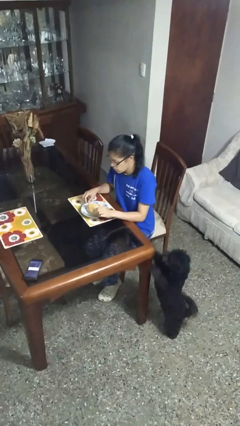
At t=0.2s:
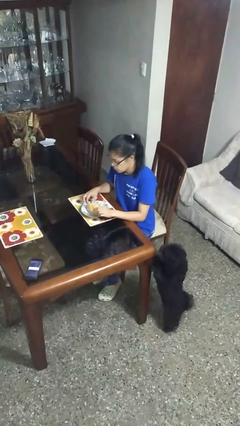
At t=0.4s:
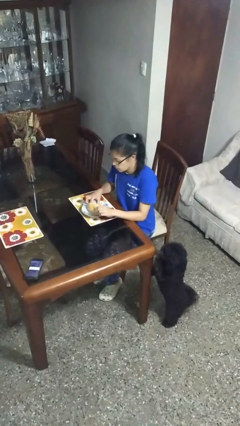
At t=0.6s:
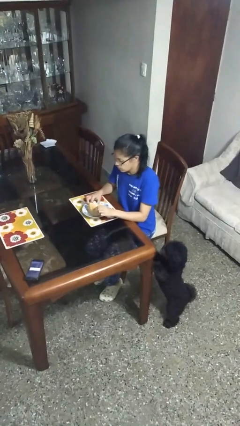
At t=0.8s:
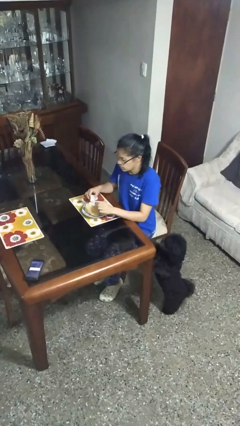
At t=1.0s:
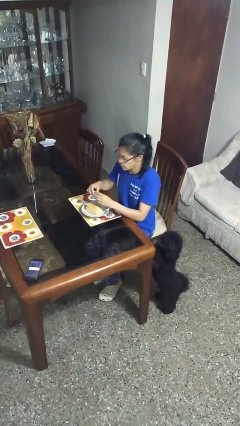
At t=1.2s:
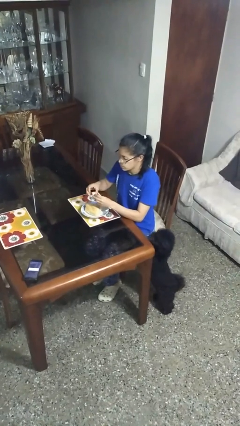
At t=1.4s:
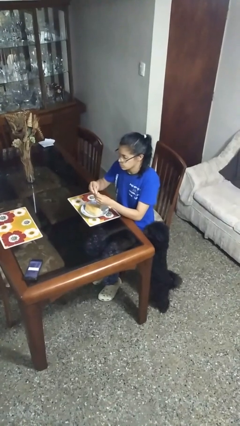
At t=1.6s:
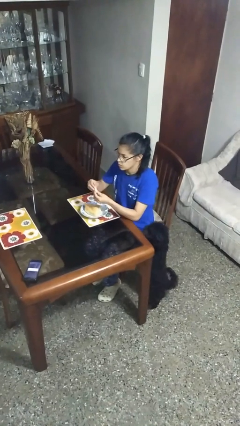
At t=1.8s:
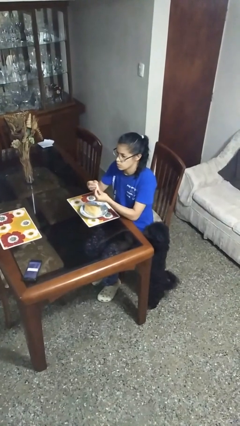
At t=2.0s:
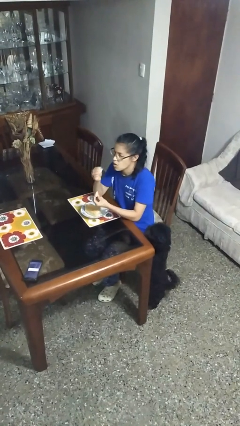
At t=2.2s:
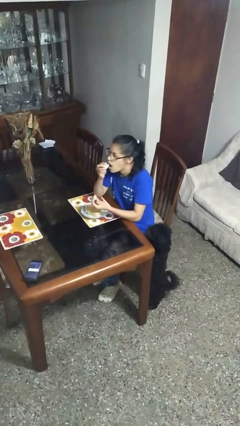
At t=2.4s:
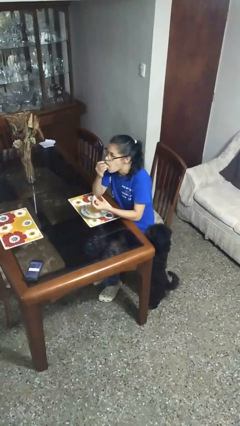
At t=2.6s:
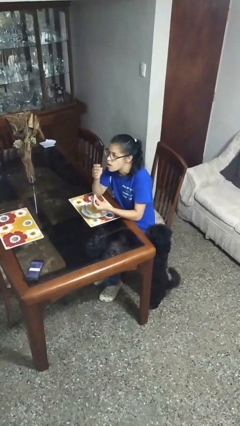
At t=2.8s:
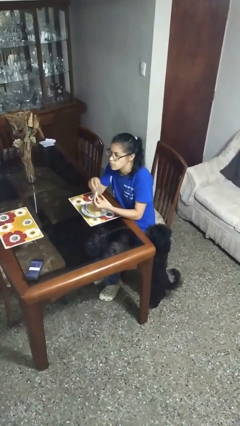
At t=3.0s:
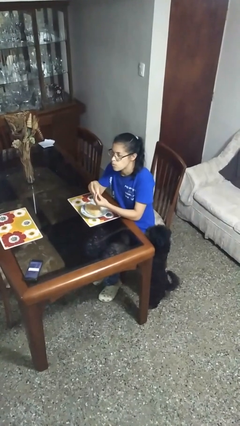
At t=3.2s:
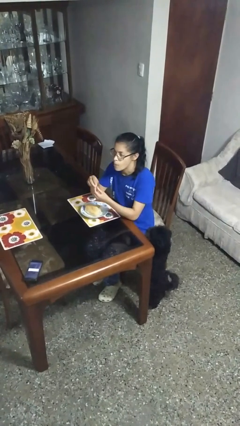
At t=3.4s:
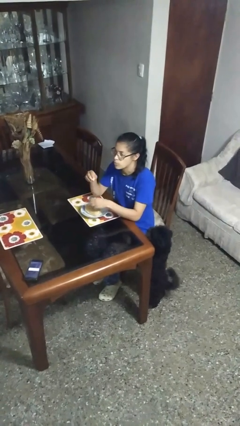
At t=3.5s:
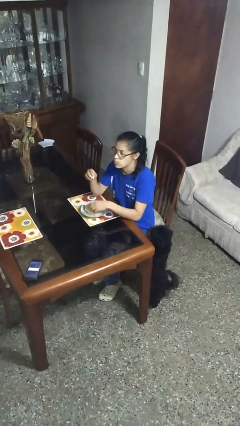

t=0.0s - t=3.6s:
person eats with hands

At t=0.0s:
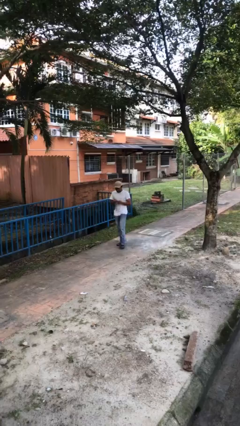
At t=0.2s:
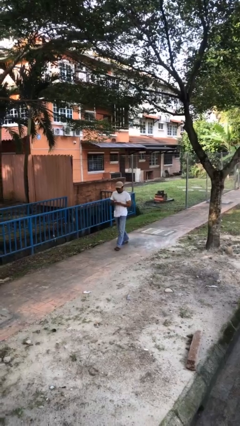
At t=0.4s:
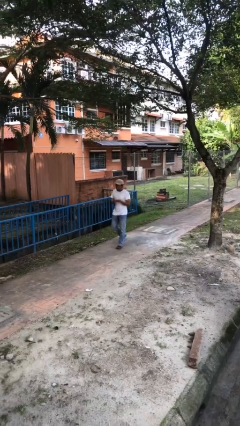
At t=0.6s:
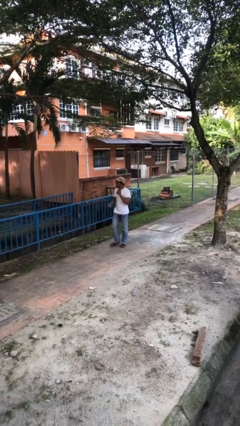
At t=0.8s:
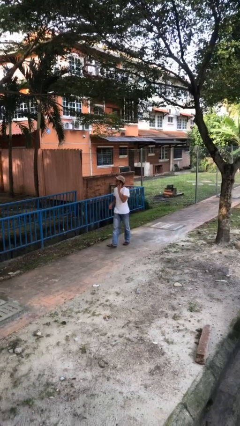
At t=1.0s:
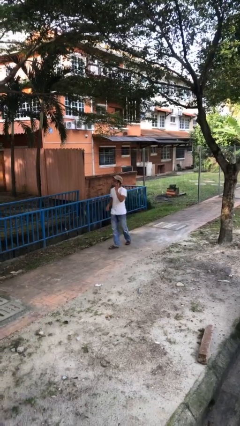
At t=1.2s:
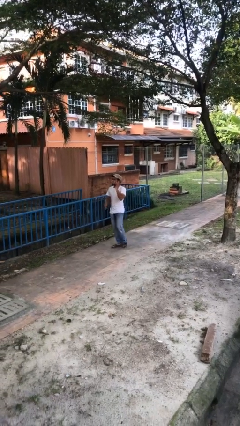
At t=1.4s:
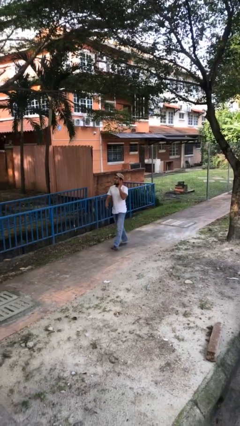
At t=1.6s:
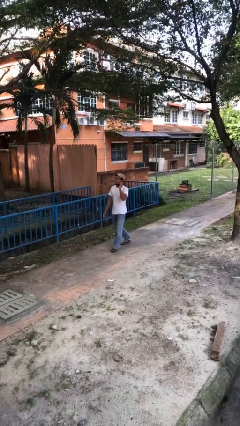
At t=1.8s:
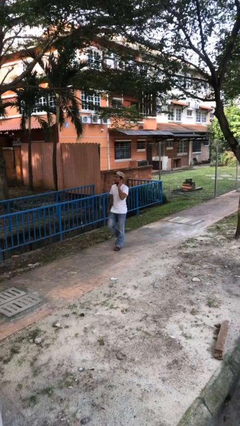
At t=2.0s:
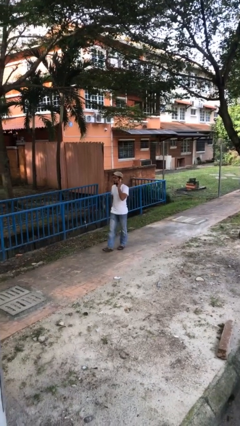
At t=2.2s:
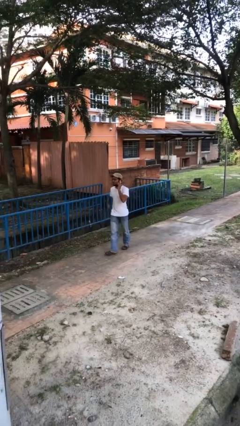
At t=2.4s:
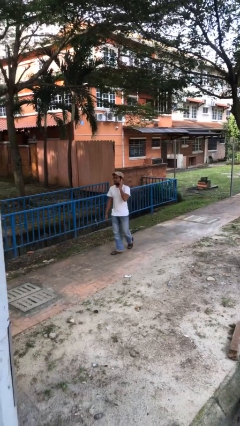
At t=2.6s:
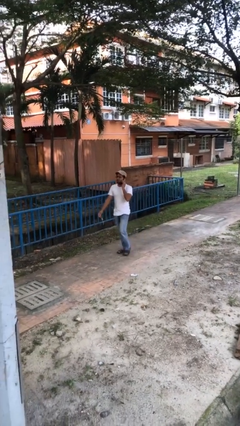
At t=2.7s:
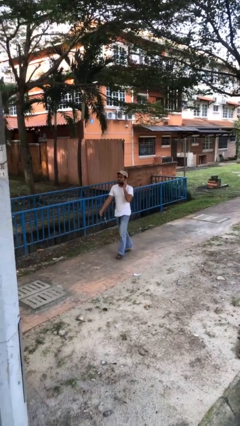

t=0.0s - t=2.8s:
person talks on phone

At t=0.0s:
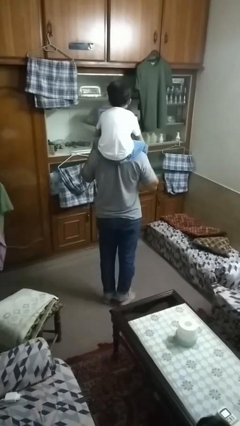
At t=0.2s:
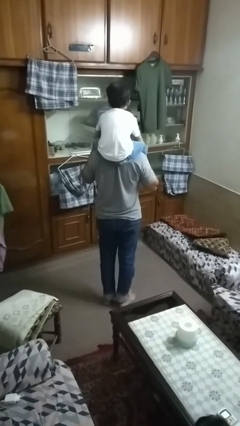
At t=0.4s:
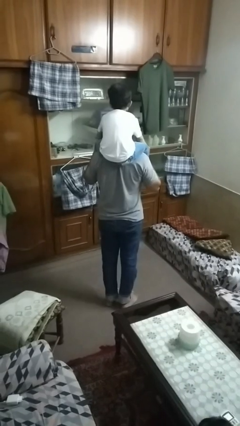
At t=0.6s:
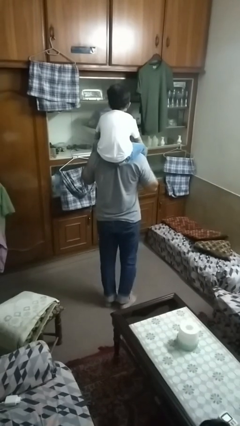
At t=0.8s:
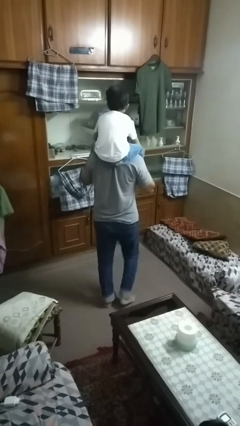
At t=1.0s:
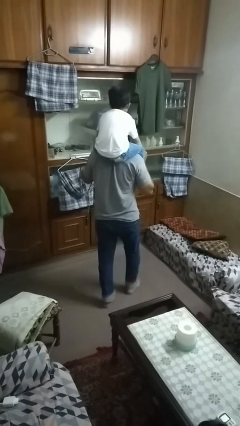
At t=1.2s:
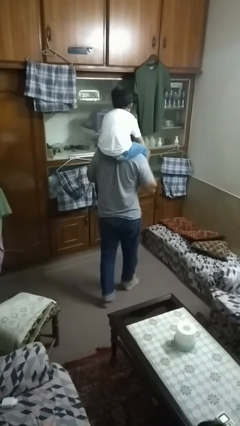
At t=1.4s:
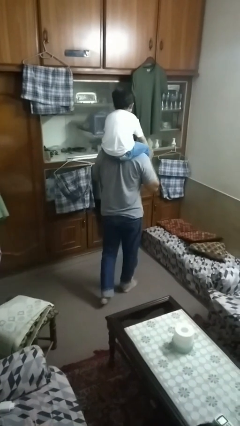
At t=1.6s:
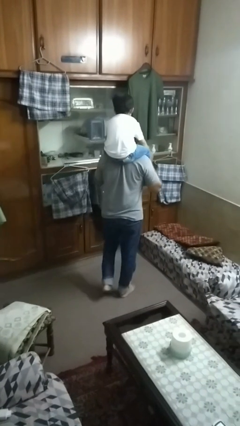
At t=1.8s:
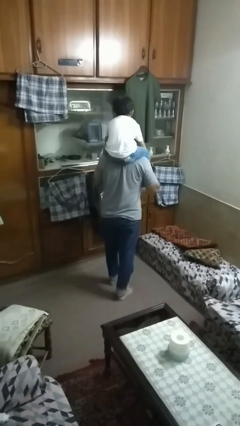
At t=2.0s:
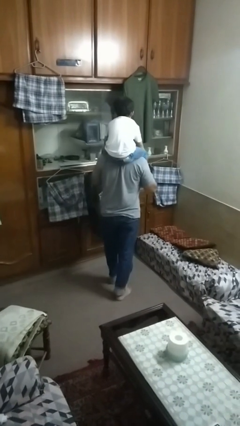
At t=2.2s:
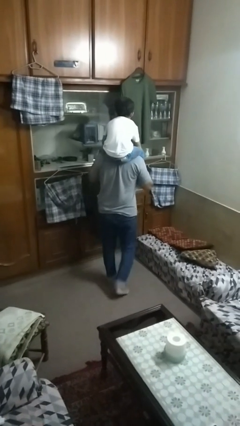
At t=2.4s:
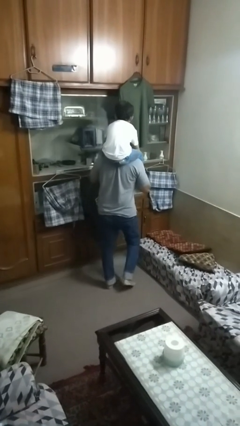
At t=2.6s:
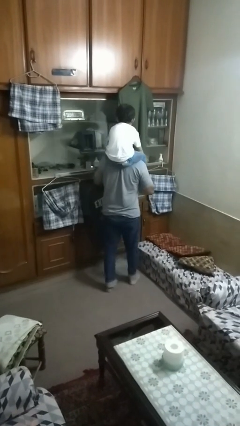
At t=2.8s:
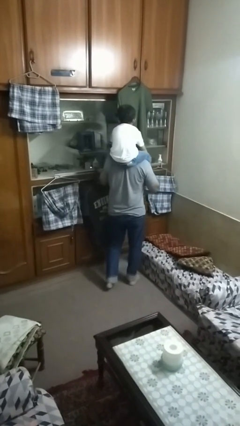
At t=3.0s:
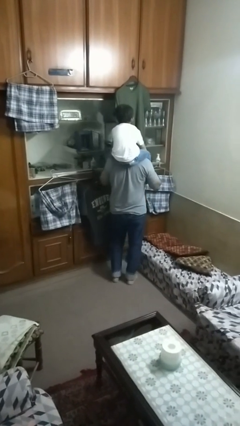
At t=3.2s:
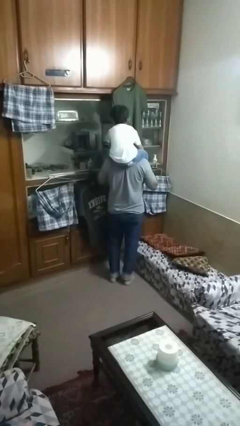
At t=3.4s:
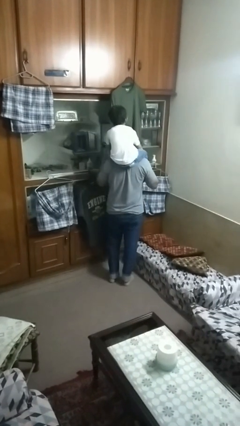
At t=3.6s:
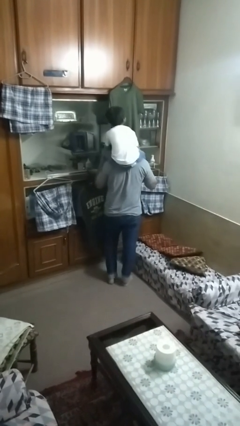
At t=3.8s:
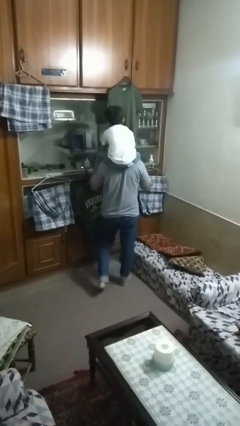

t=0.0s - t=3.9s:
person carries person on shoulders

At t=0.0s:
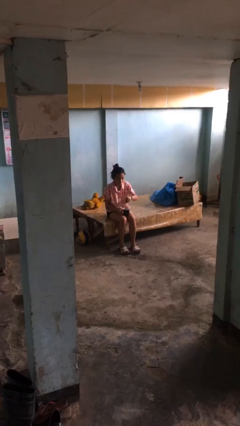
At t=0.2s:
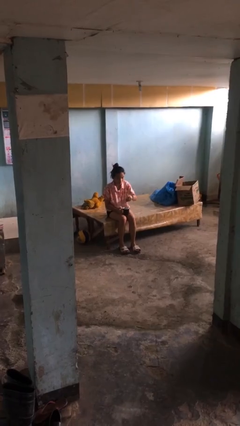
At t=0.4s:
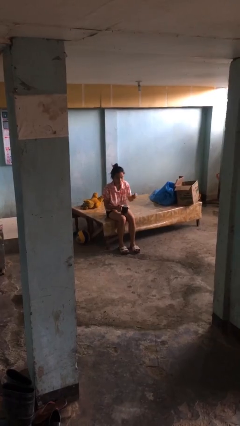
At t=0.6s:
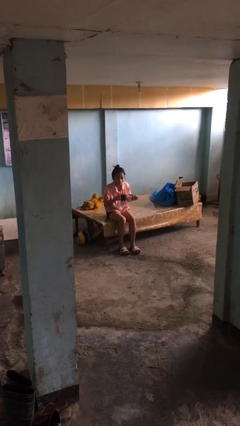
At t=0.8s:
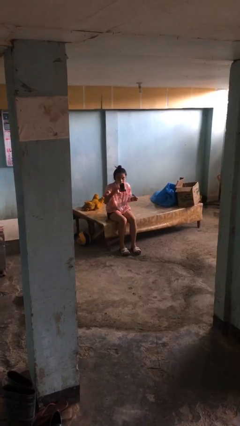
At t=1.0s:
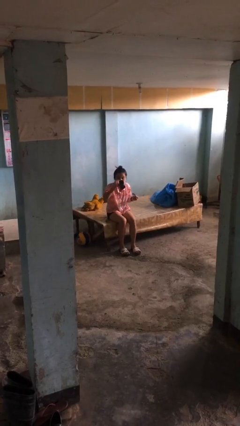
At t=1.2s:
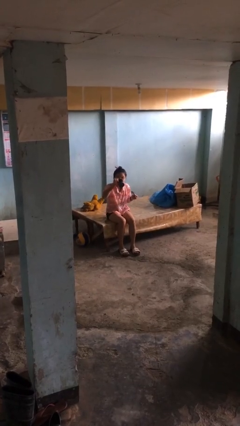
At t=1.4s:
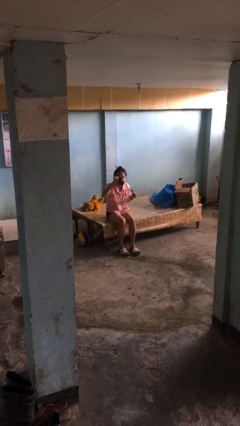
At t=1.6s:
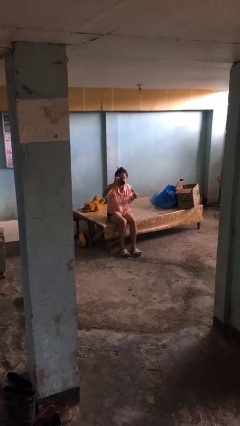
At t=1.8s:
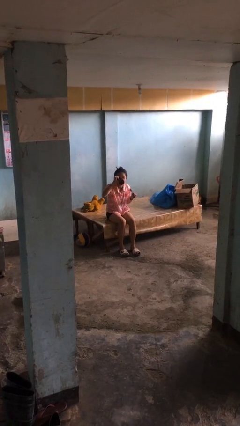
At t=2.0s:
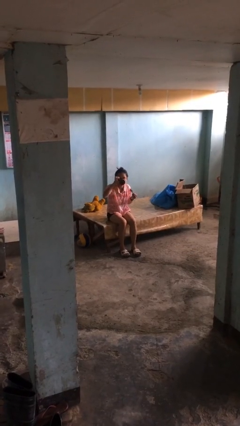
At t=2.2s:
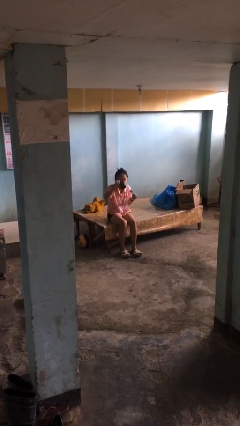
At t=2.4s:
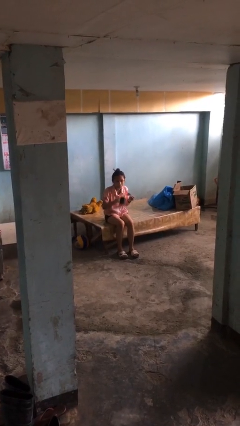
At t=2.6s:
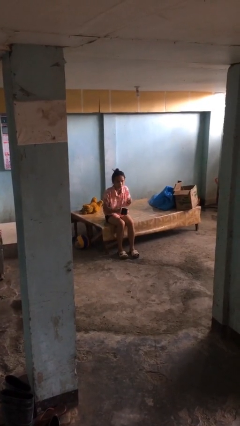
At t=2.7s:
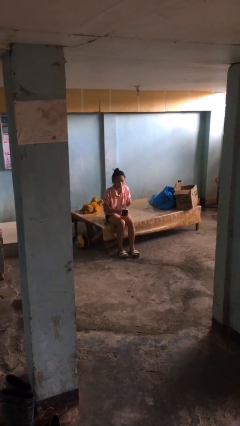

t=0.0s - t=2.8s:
person drinks from mug

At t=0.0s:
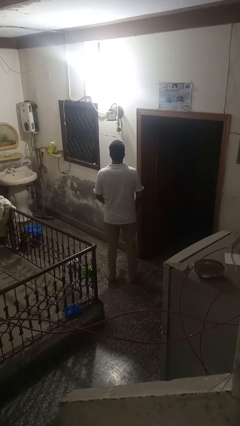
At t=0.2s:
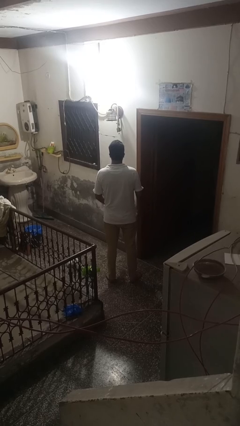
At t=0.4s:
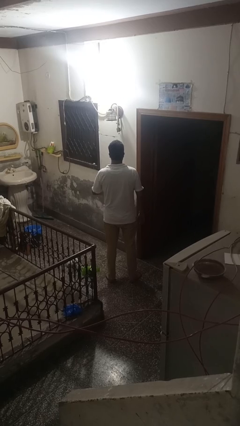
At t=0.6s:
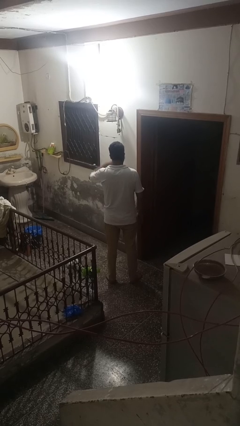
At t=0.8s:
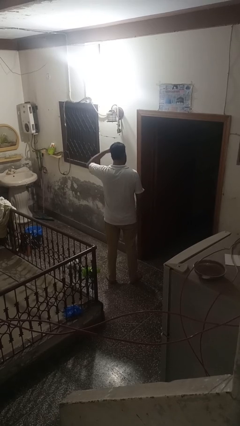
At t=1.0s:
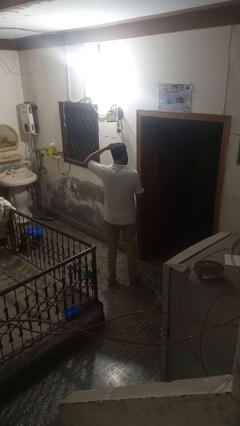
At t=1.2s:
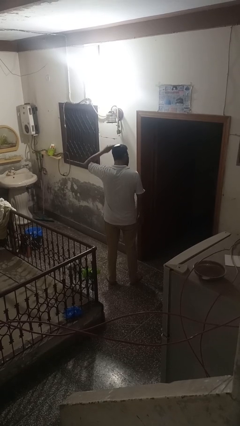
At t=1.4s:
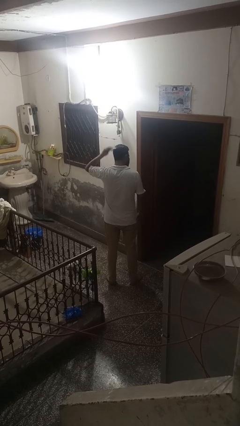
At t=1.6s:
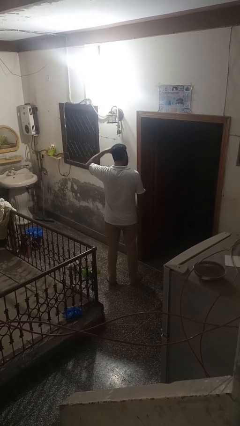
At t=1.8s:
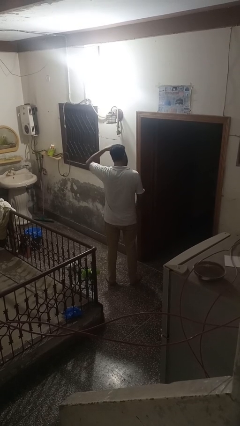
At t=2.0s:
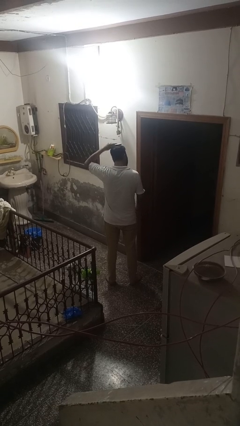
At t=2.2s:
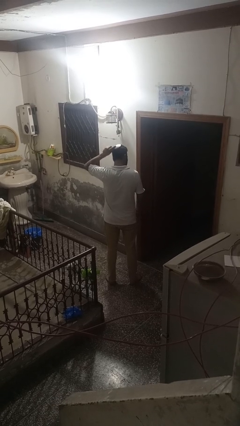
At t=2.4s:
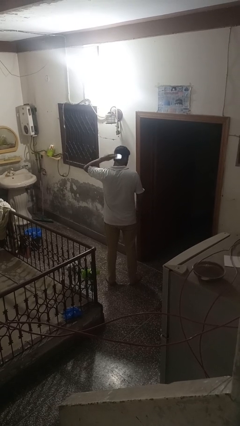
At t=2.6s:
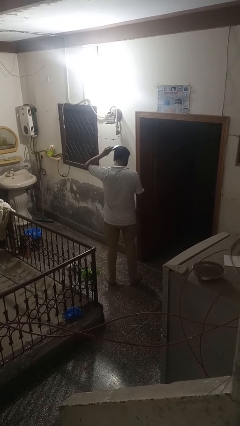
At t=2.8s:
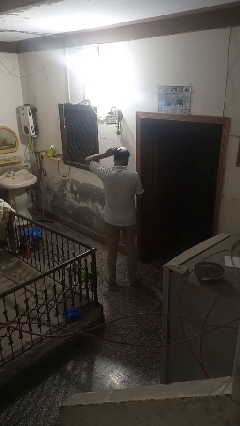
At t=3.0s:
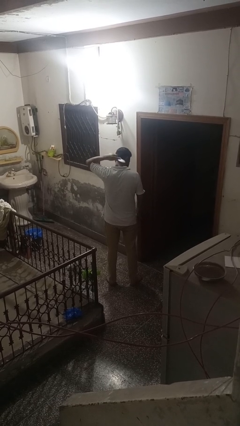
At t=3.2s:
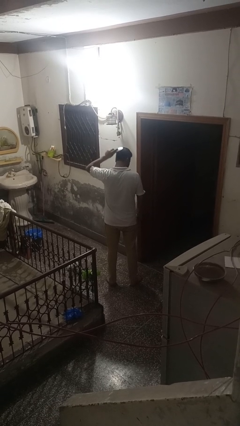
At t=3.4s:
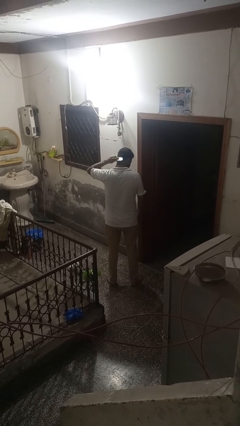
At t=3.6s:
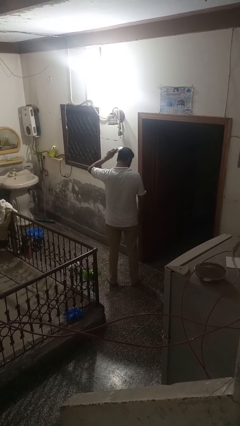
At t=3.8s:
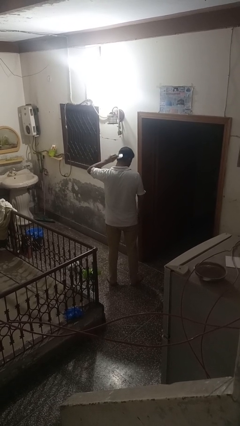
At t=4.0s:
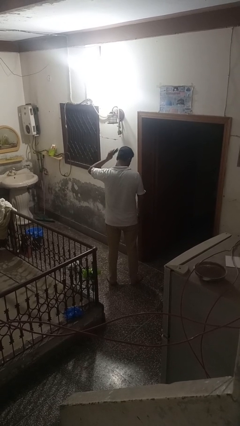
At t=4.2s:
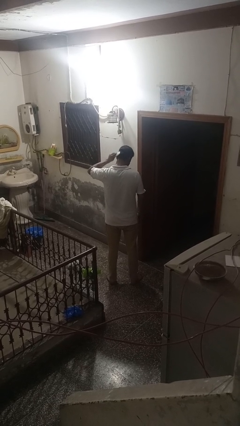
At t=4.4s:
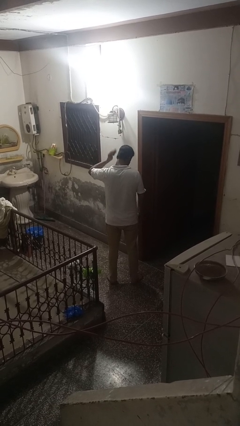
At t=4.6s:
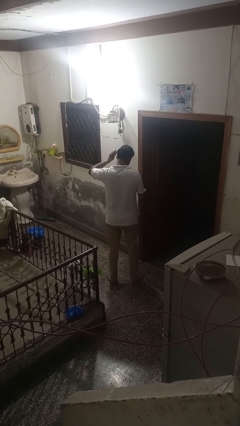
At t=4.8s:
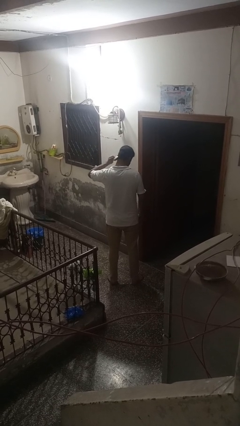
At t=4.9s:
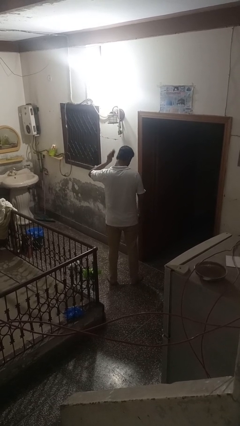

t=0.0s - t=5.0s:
person brushes hair
